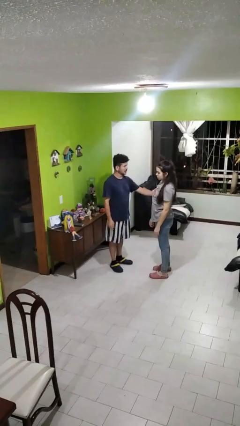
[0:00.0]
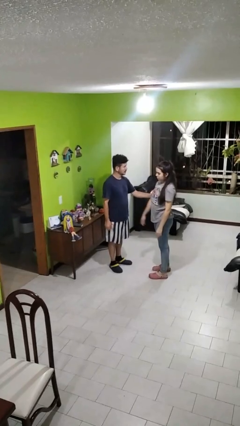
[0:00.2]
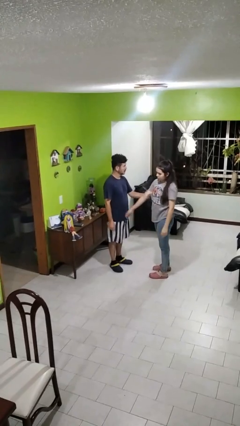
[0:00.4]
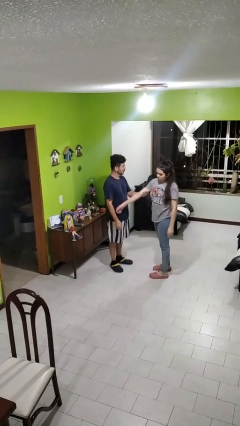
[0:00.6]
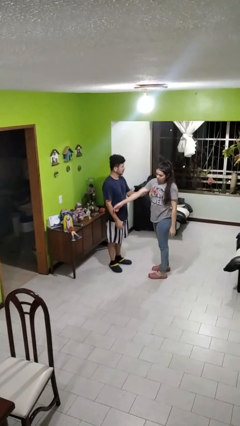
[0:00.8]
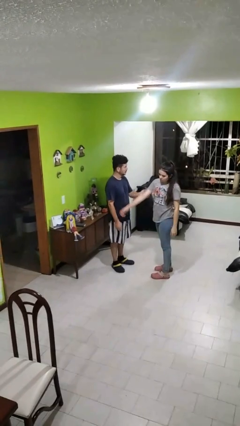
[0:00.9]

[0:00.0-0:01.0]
person grabs person by bicep

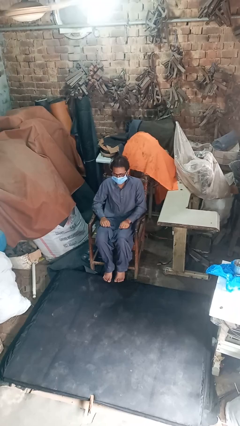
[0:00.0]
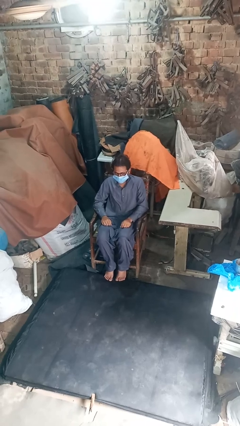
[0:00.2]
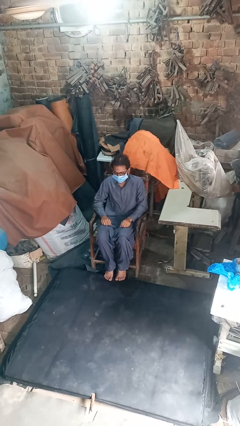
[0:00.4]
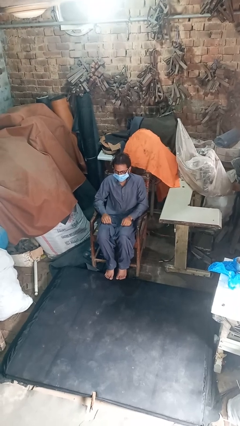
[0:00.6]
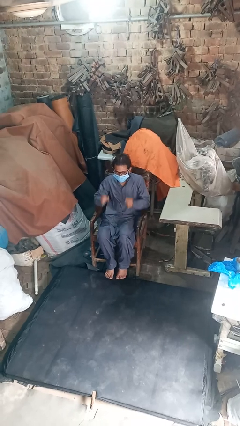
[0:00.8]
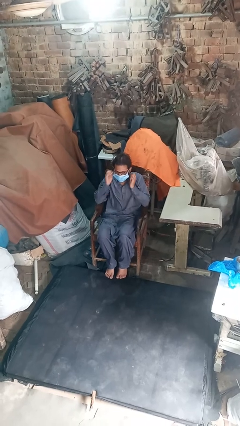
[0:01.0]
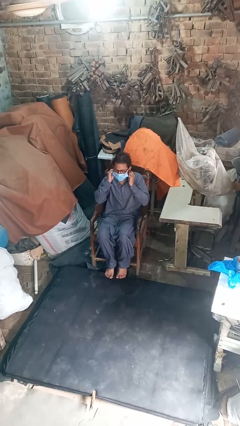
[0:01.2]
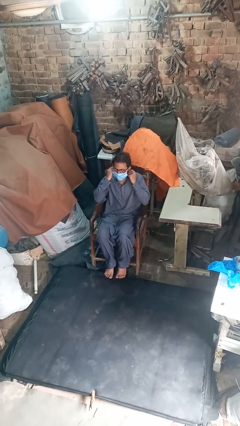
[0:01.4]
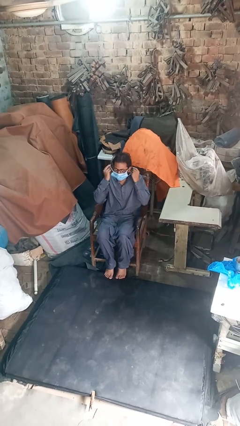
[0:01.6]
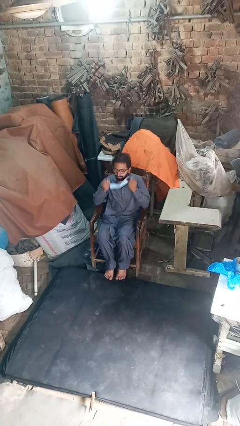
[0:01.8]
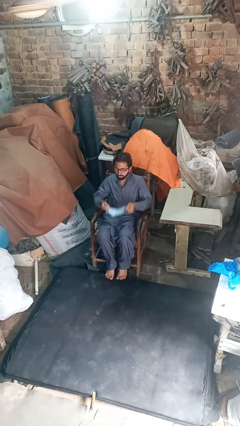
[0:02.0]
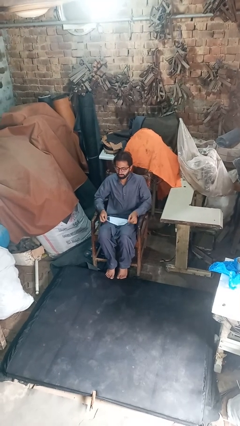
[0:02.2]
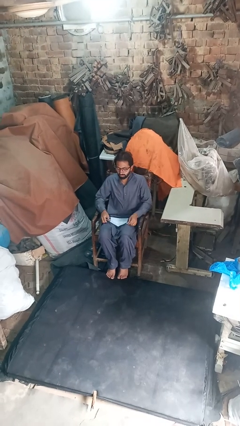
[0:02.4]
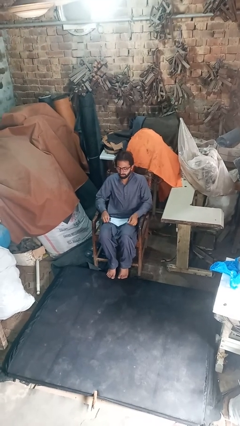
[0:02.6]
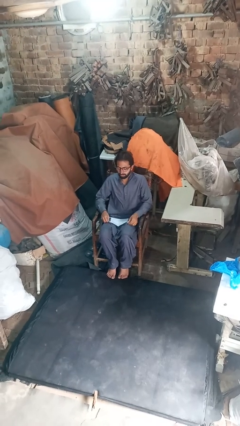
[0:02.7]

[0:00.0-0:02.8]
person takes off facemask

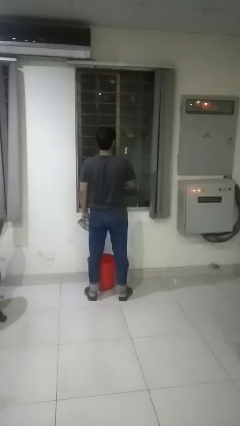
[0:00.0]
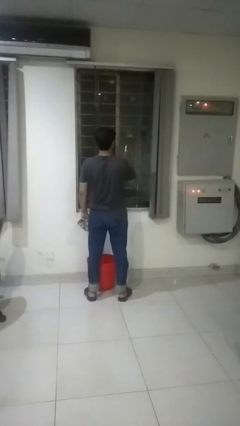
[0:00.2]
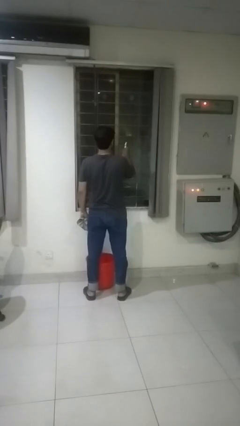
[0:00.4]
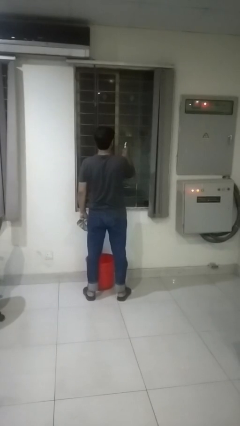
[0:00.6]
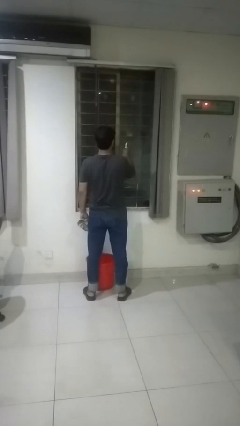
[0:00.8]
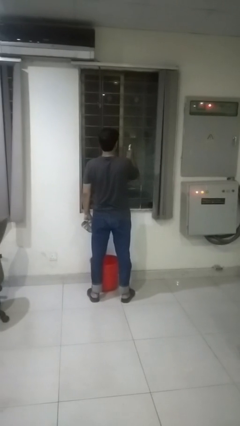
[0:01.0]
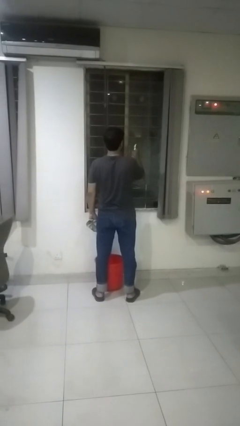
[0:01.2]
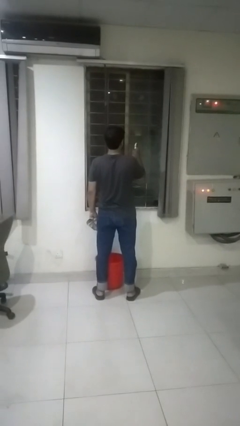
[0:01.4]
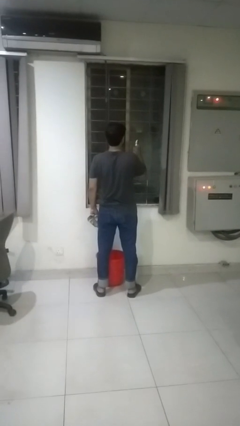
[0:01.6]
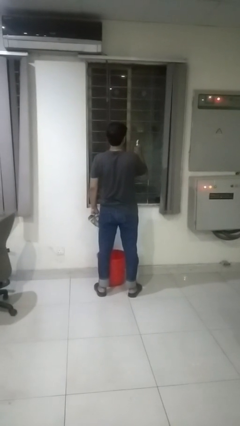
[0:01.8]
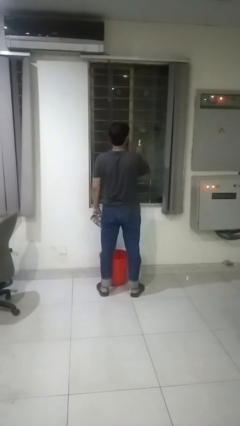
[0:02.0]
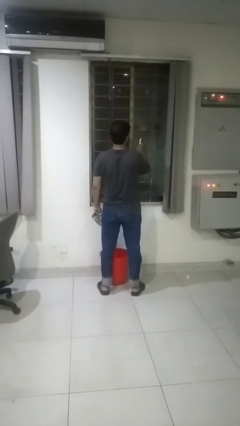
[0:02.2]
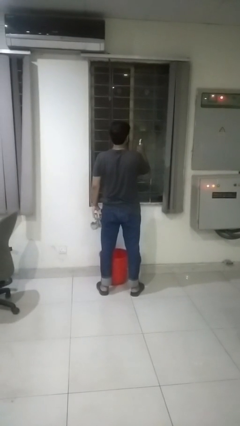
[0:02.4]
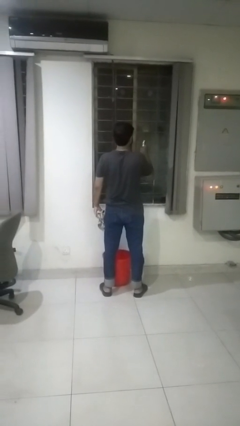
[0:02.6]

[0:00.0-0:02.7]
person sprays from bottle

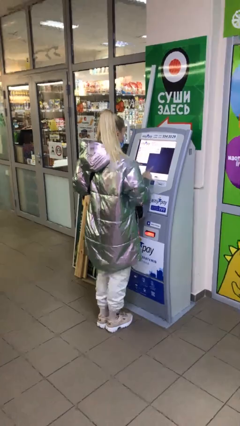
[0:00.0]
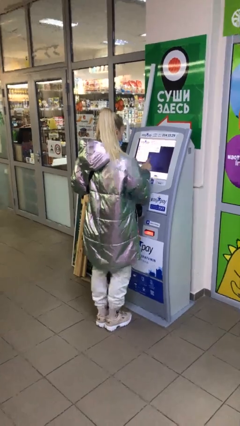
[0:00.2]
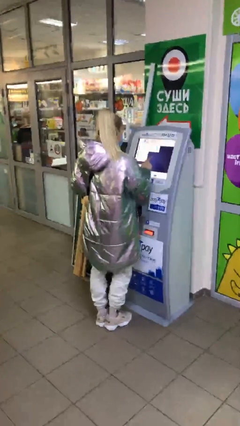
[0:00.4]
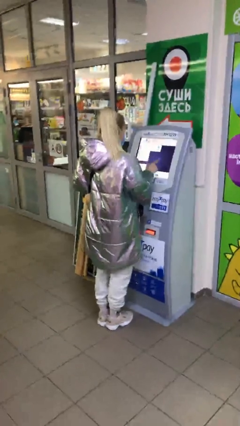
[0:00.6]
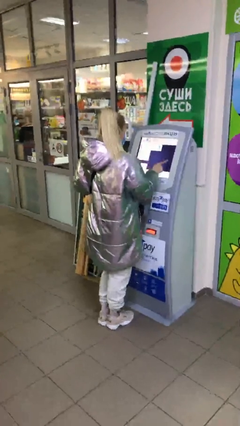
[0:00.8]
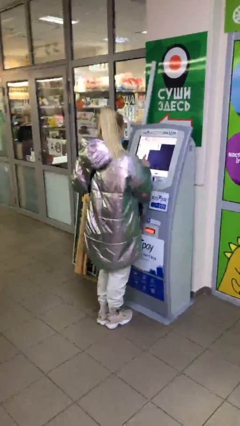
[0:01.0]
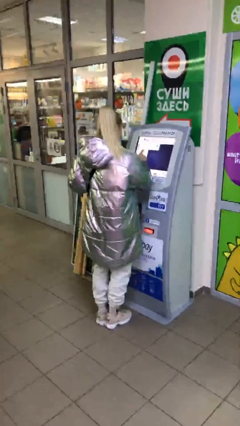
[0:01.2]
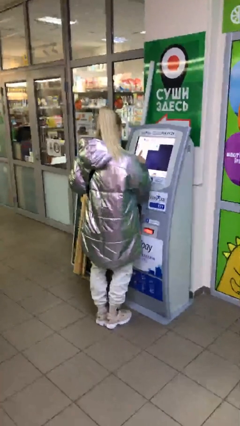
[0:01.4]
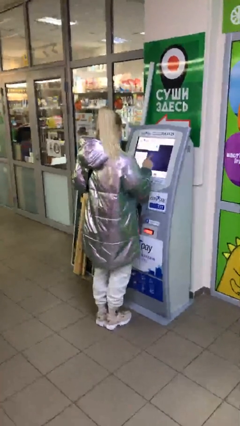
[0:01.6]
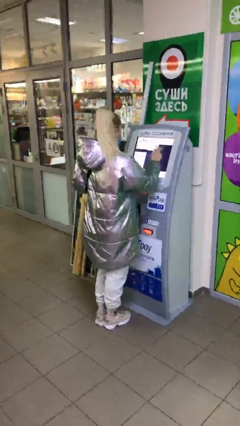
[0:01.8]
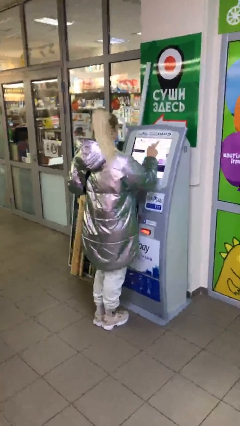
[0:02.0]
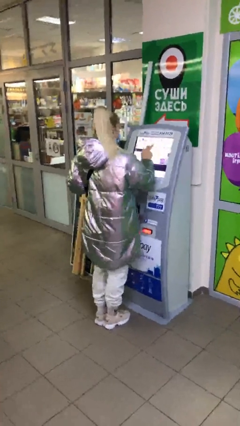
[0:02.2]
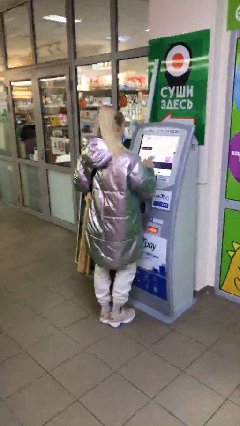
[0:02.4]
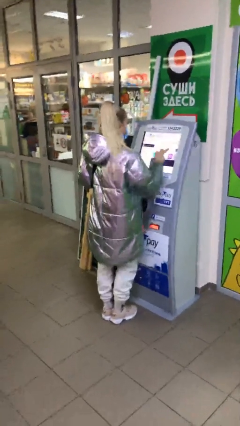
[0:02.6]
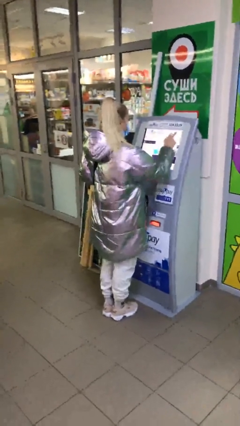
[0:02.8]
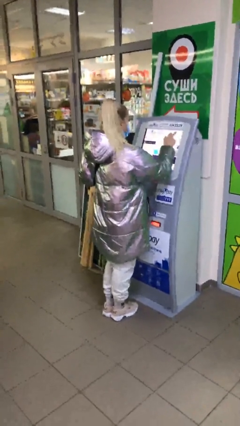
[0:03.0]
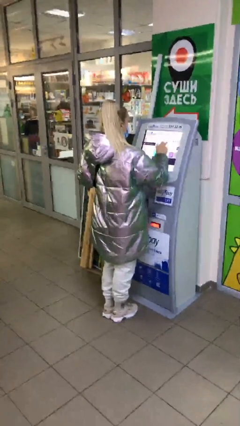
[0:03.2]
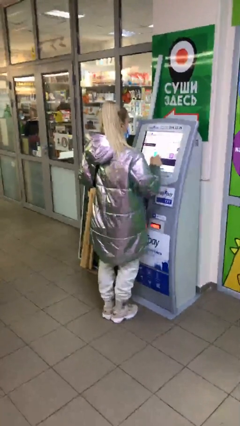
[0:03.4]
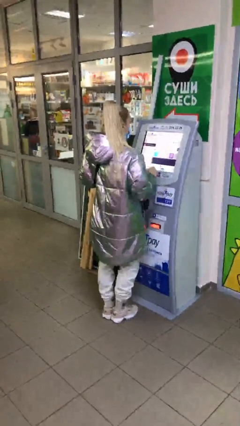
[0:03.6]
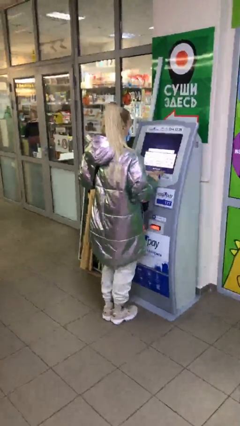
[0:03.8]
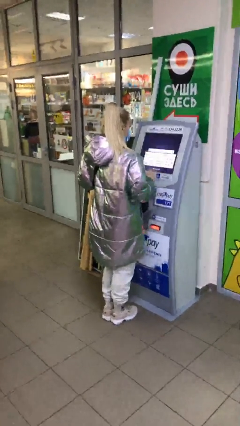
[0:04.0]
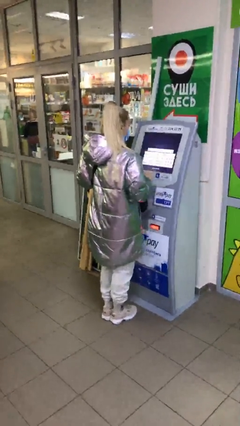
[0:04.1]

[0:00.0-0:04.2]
person purchases from machine

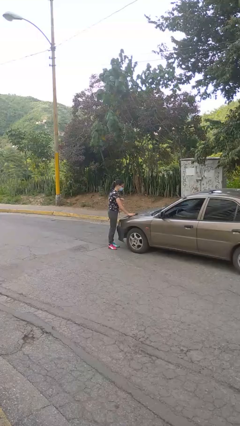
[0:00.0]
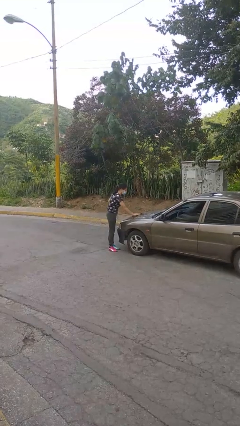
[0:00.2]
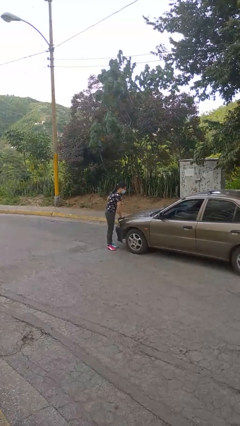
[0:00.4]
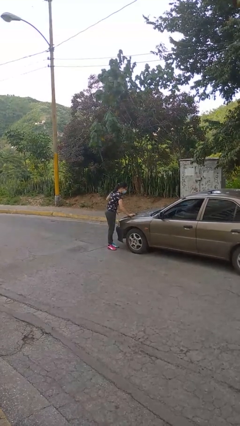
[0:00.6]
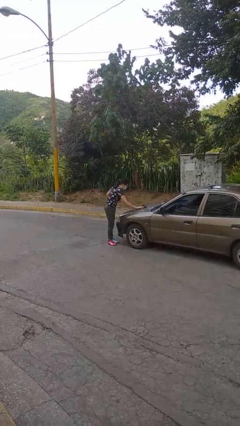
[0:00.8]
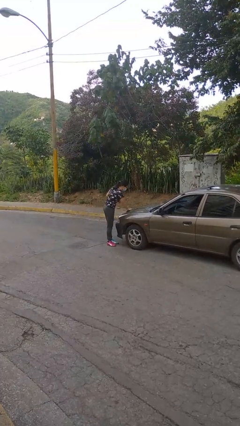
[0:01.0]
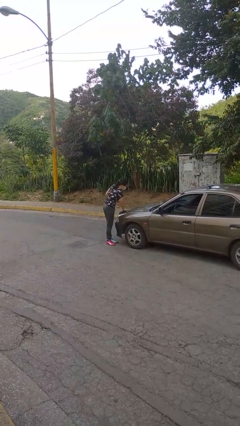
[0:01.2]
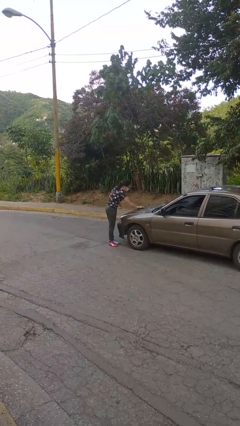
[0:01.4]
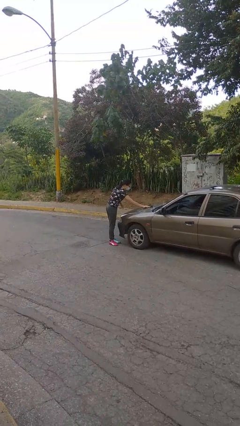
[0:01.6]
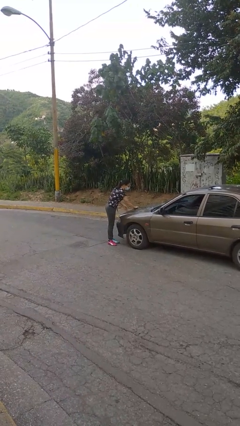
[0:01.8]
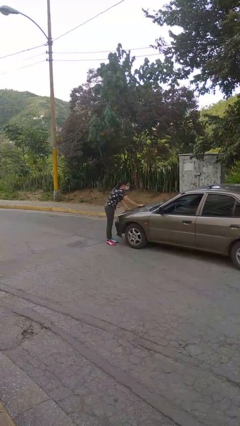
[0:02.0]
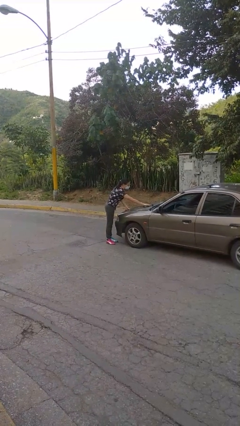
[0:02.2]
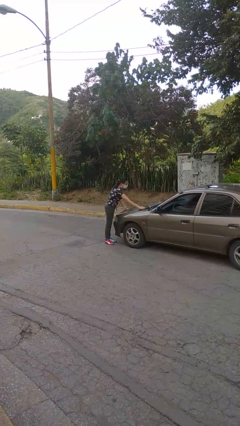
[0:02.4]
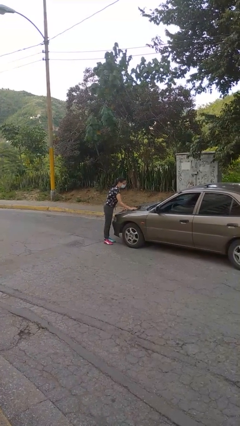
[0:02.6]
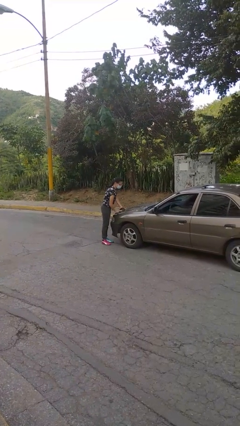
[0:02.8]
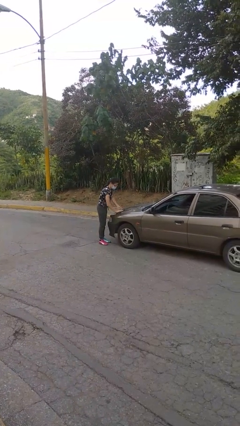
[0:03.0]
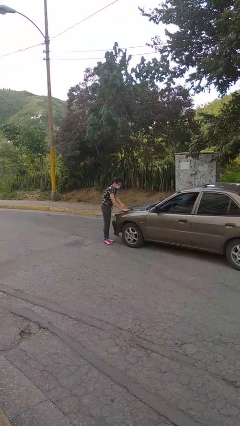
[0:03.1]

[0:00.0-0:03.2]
person polishes car with rag

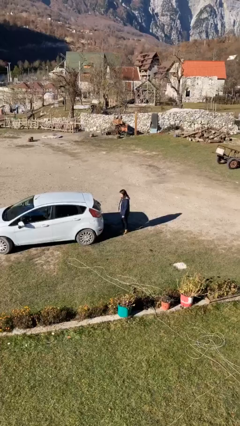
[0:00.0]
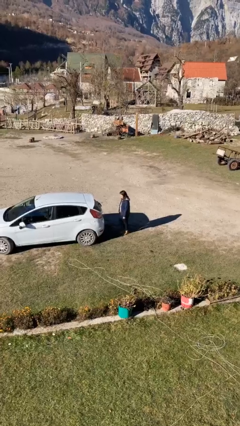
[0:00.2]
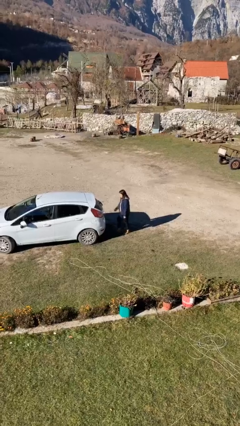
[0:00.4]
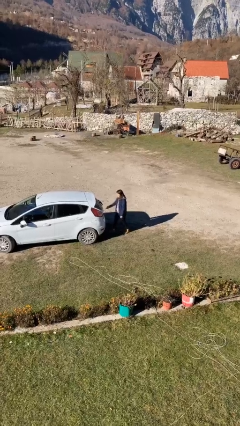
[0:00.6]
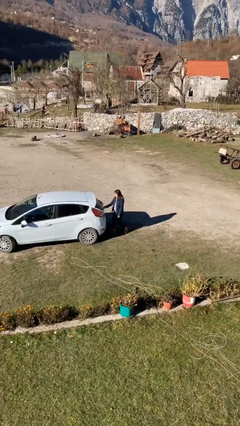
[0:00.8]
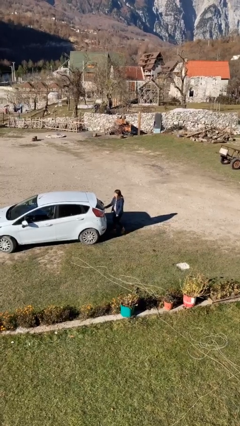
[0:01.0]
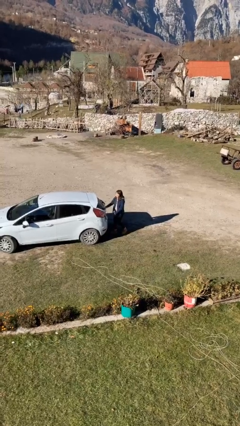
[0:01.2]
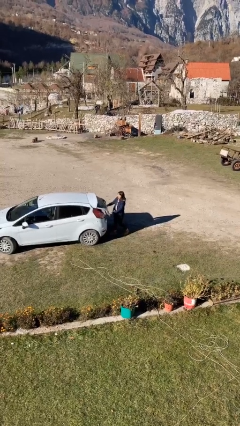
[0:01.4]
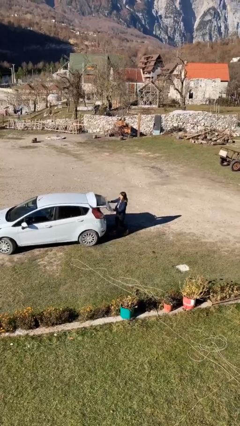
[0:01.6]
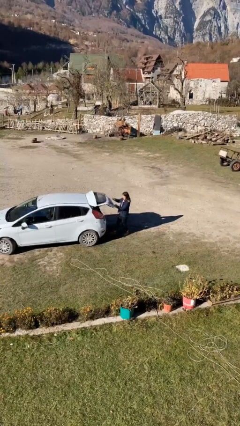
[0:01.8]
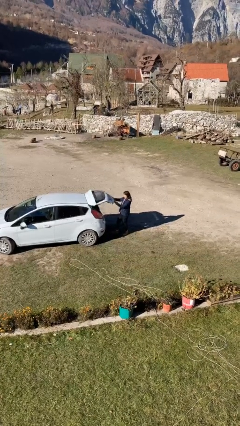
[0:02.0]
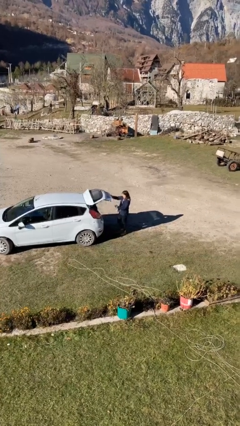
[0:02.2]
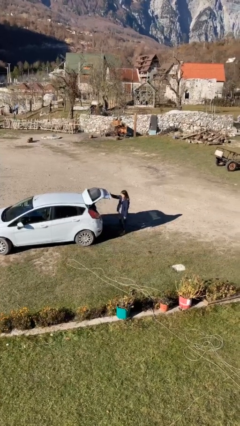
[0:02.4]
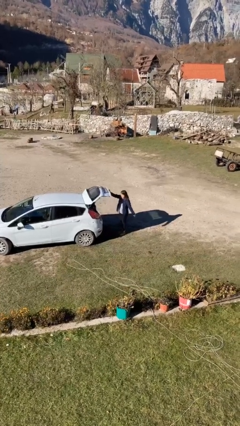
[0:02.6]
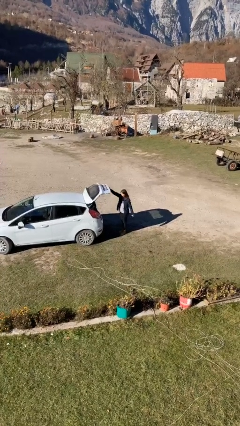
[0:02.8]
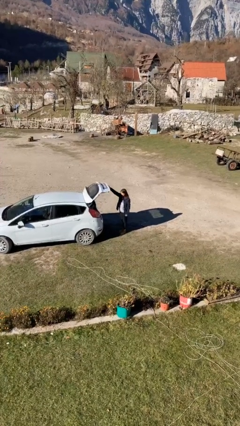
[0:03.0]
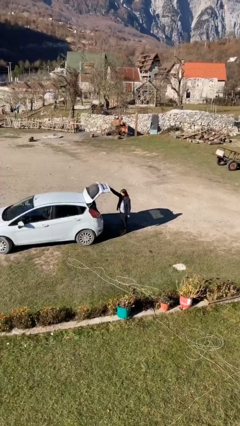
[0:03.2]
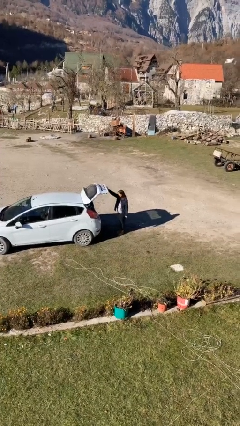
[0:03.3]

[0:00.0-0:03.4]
person opens car trunk
